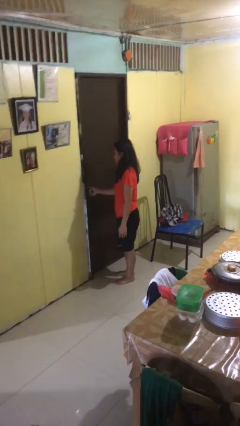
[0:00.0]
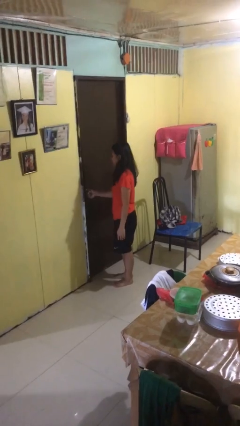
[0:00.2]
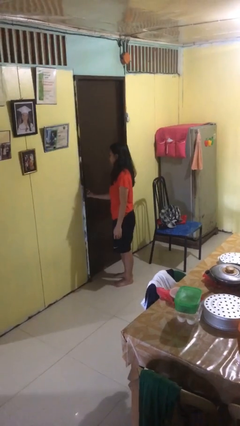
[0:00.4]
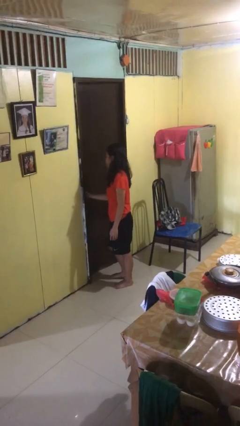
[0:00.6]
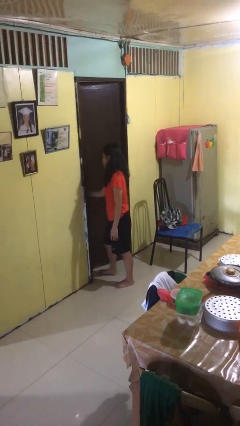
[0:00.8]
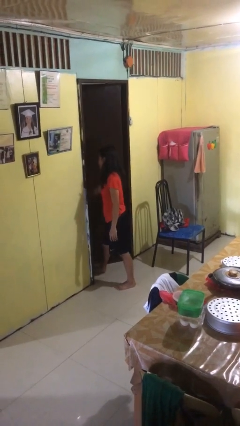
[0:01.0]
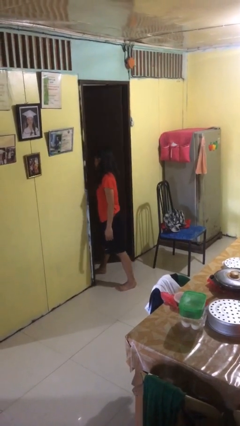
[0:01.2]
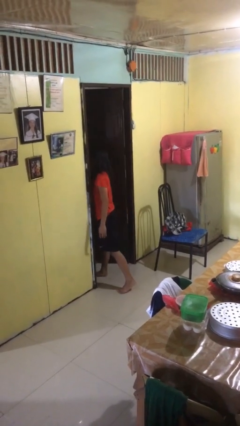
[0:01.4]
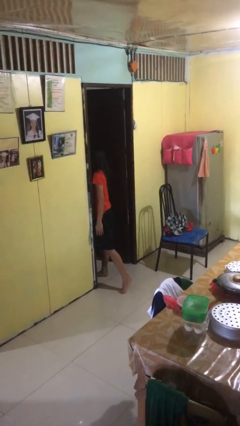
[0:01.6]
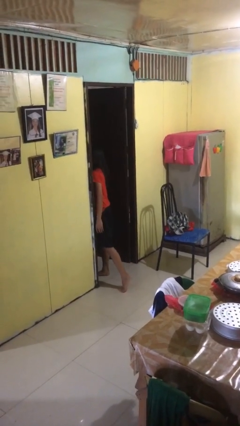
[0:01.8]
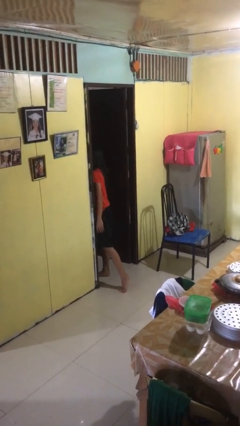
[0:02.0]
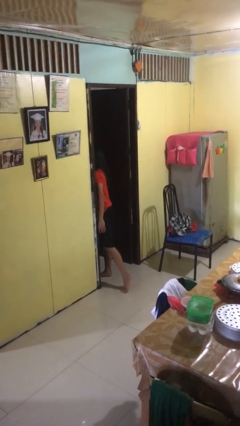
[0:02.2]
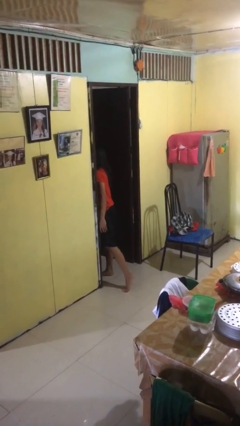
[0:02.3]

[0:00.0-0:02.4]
person opens facility door

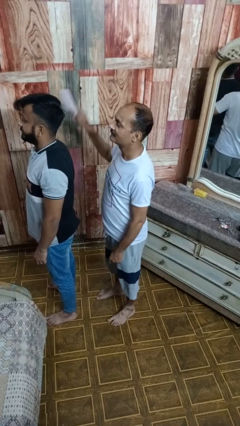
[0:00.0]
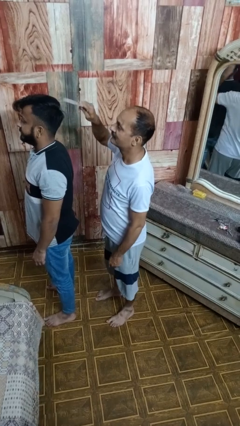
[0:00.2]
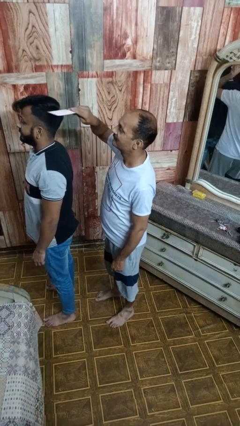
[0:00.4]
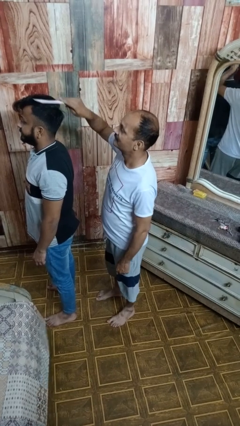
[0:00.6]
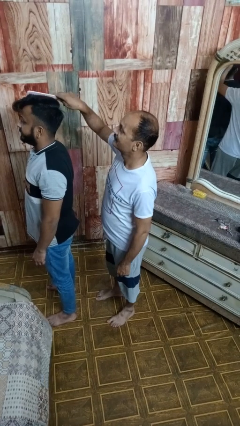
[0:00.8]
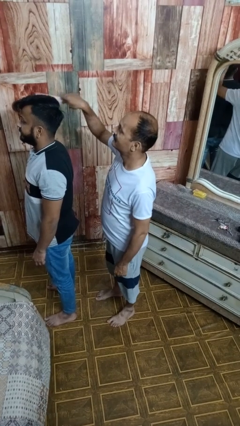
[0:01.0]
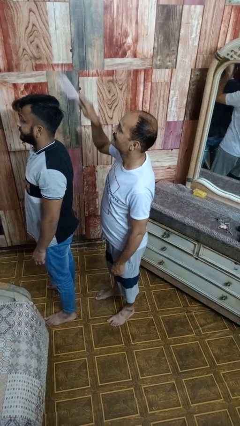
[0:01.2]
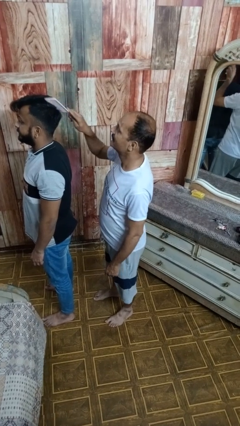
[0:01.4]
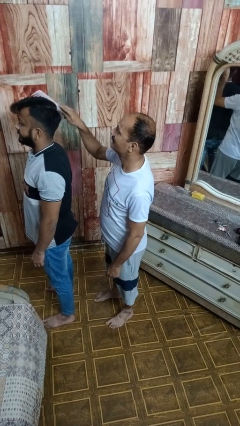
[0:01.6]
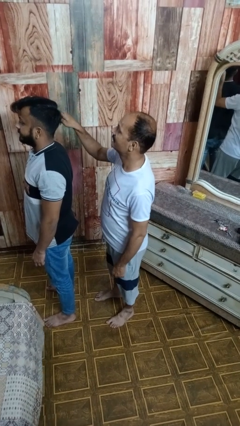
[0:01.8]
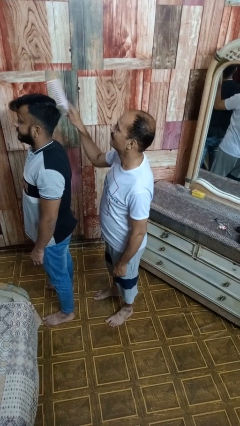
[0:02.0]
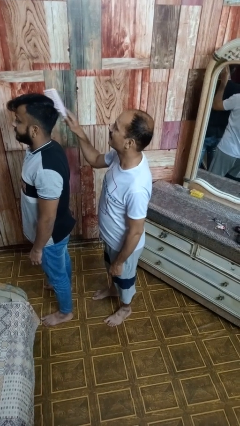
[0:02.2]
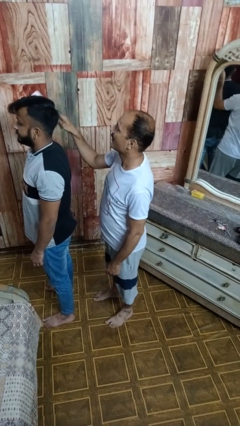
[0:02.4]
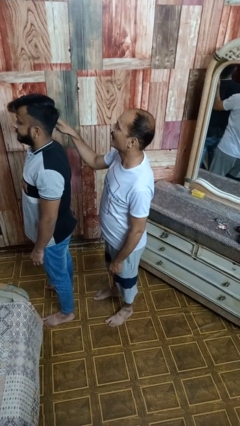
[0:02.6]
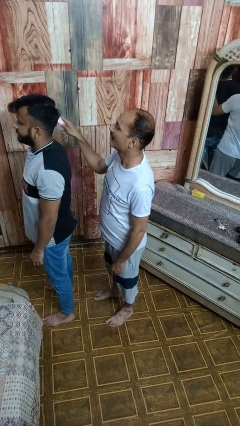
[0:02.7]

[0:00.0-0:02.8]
person brushes hair of person

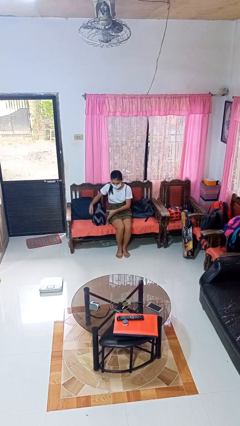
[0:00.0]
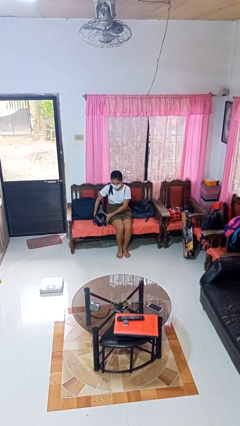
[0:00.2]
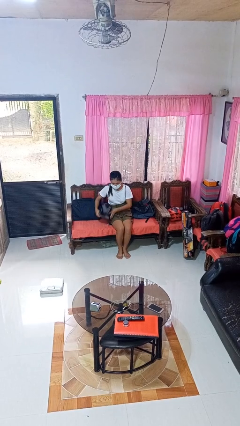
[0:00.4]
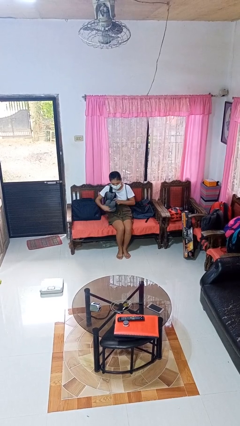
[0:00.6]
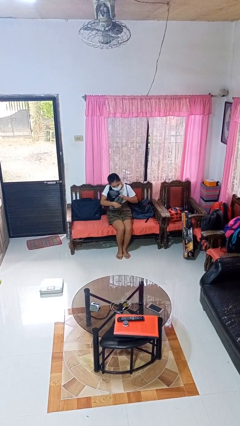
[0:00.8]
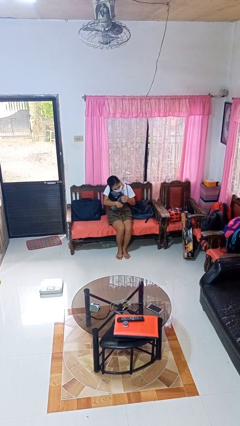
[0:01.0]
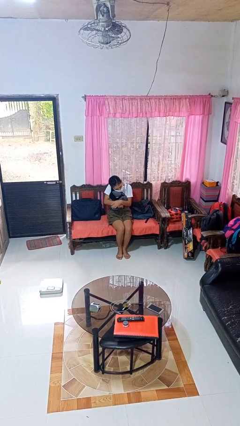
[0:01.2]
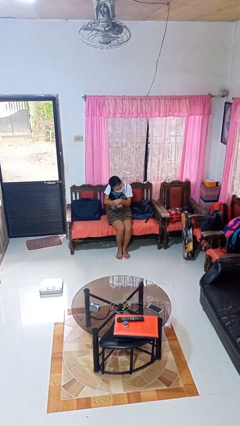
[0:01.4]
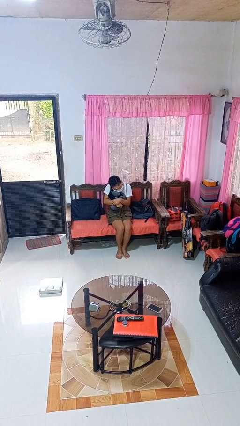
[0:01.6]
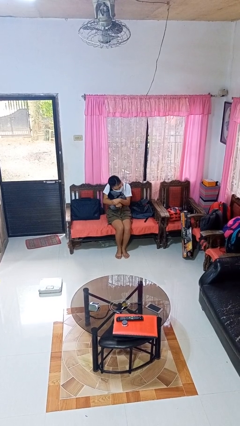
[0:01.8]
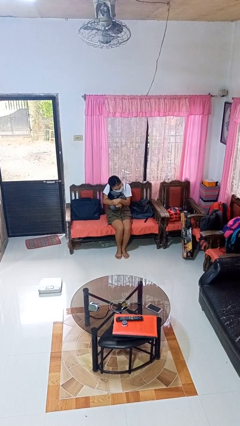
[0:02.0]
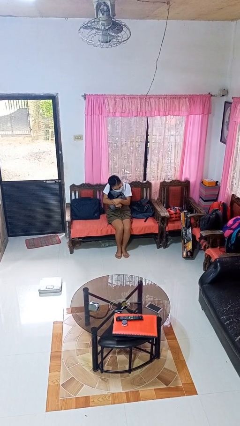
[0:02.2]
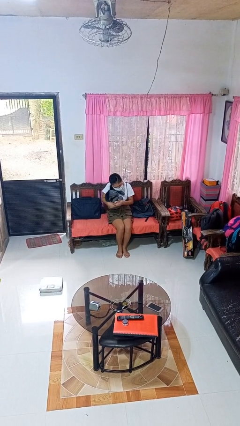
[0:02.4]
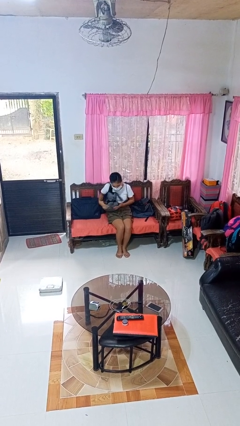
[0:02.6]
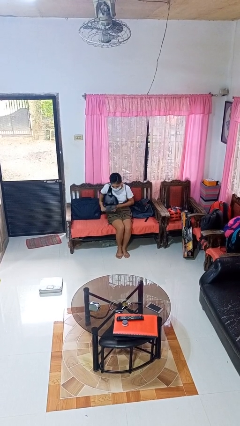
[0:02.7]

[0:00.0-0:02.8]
person hugs stuffed animal

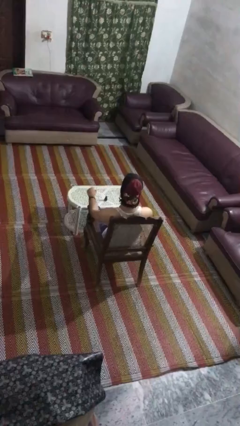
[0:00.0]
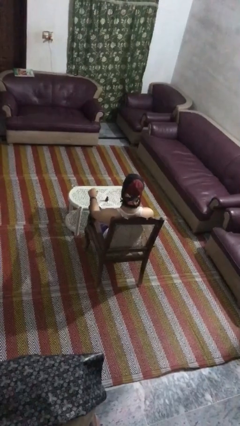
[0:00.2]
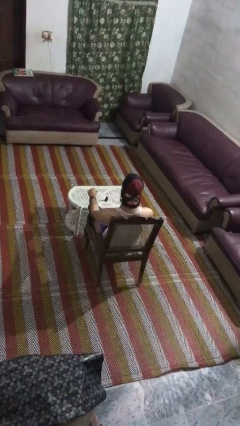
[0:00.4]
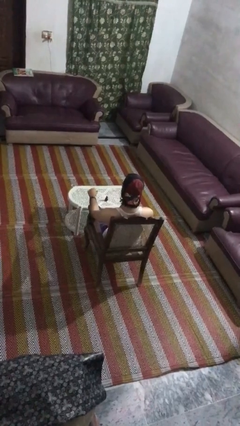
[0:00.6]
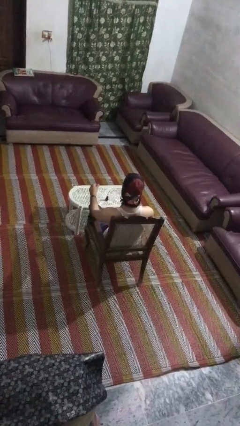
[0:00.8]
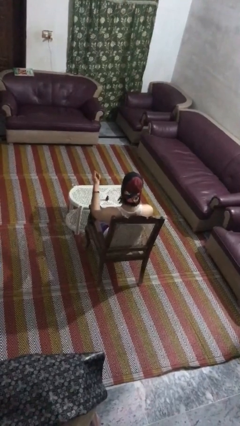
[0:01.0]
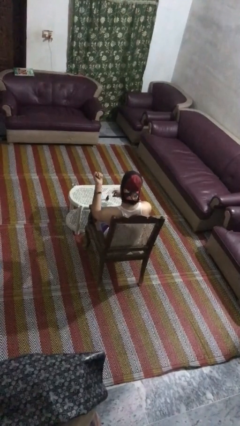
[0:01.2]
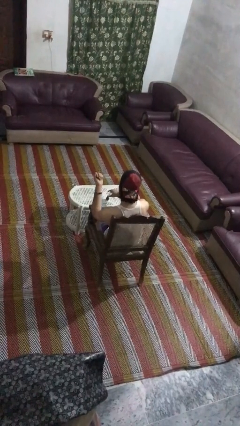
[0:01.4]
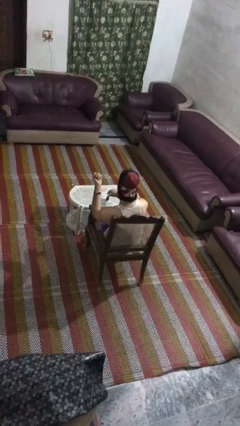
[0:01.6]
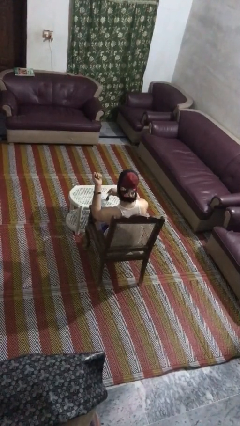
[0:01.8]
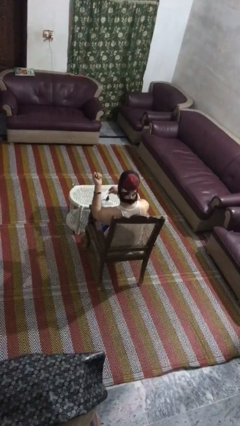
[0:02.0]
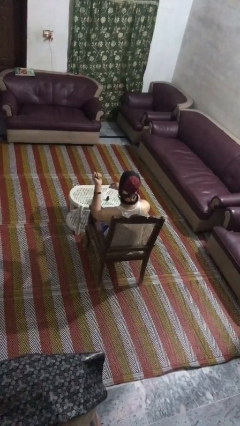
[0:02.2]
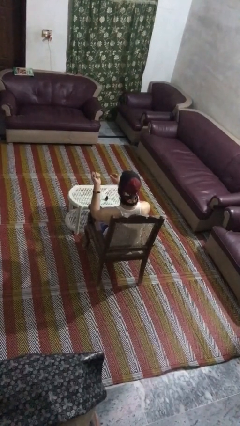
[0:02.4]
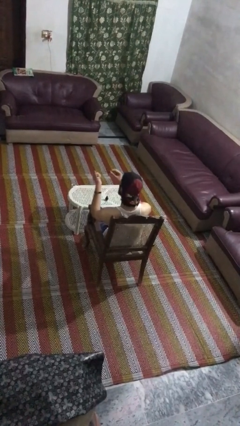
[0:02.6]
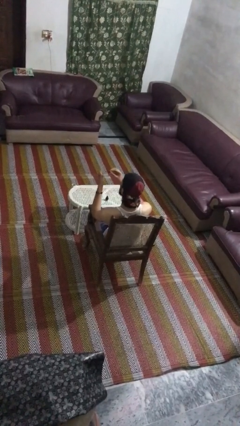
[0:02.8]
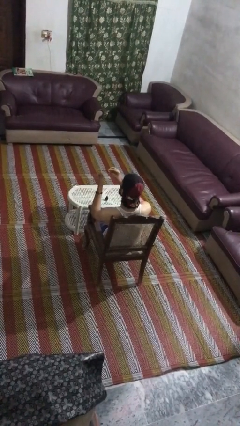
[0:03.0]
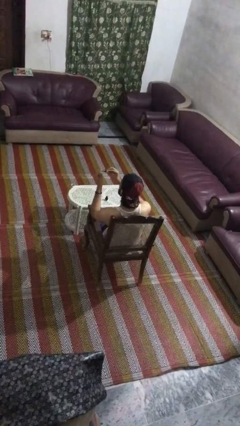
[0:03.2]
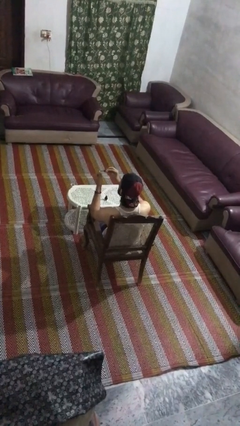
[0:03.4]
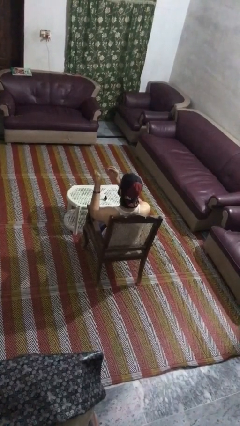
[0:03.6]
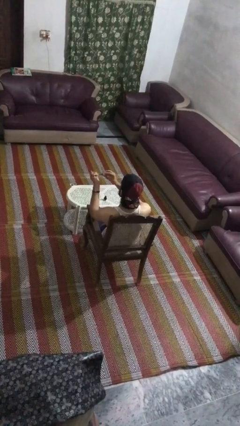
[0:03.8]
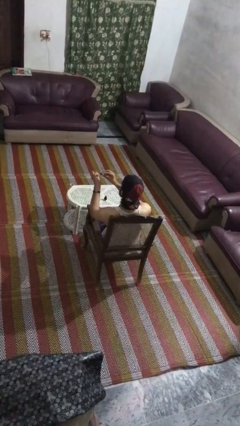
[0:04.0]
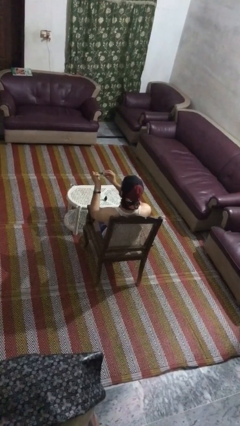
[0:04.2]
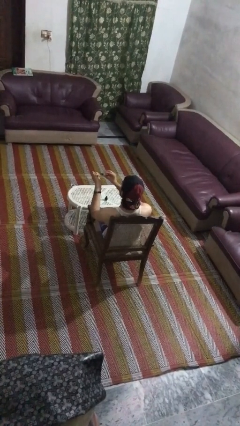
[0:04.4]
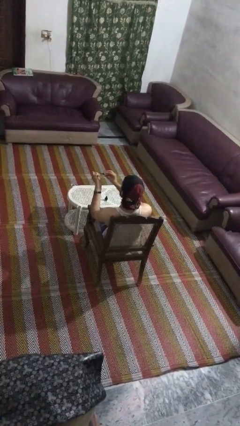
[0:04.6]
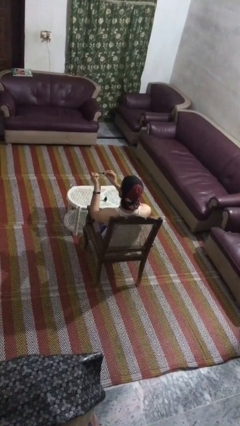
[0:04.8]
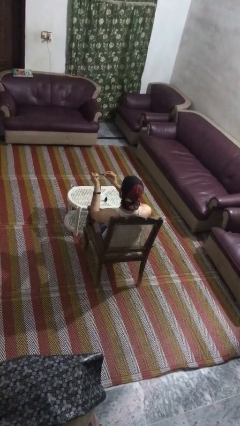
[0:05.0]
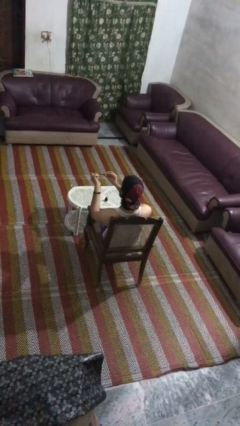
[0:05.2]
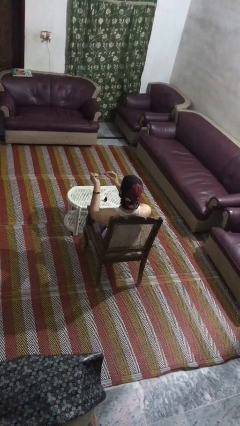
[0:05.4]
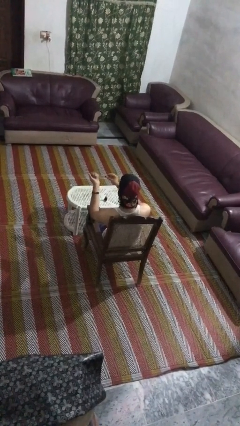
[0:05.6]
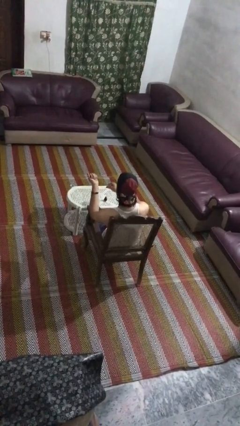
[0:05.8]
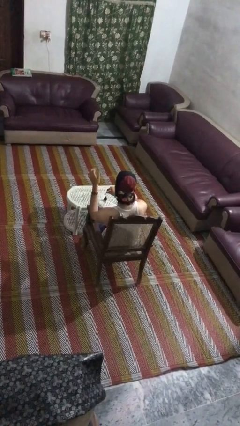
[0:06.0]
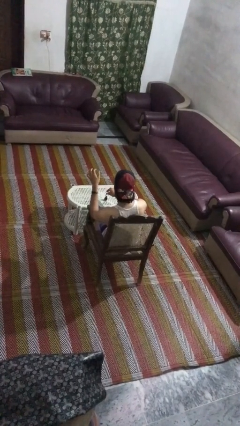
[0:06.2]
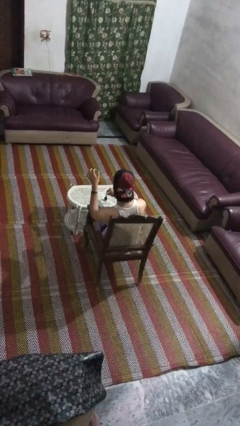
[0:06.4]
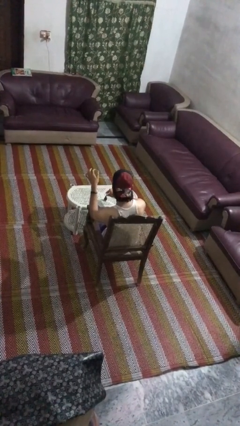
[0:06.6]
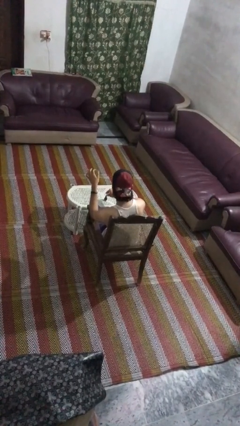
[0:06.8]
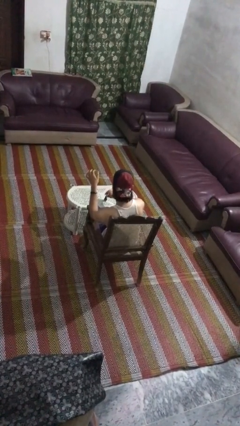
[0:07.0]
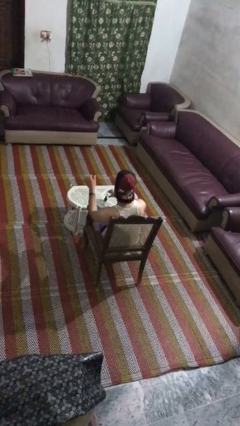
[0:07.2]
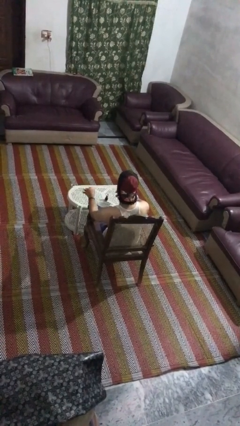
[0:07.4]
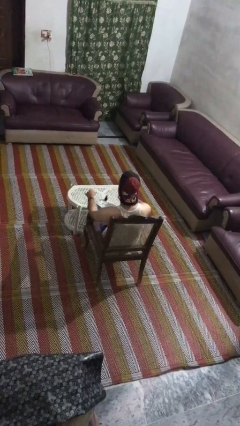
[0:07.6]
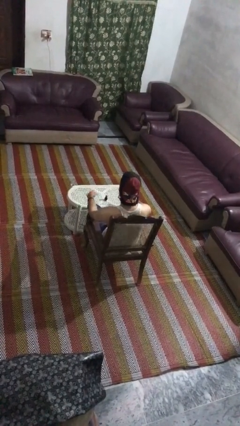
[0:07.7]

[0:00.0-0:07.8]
person paints fingernails

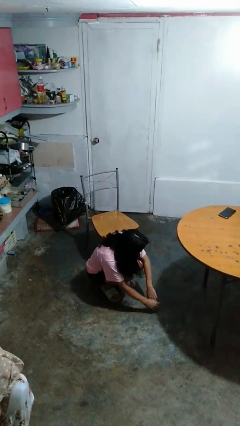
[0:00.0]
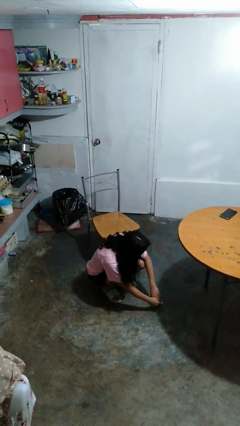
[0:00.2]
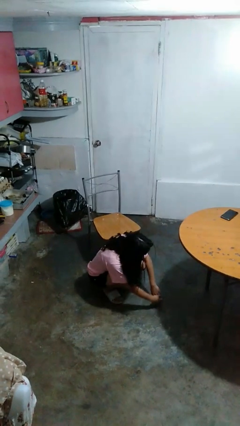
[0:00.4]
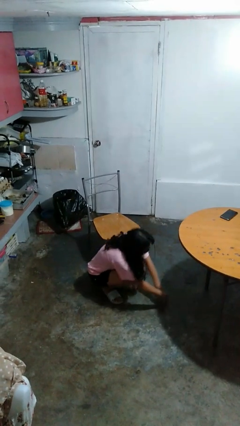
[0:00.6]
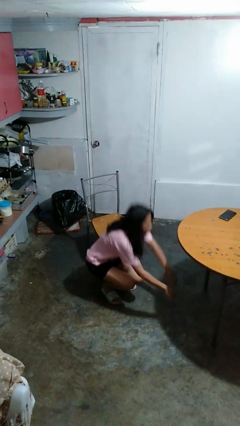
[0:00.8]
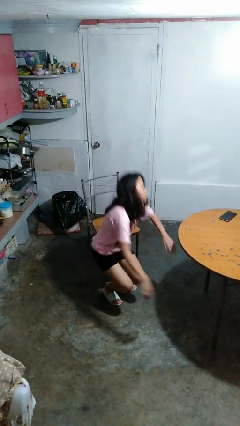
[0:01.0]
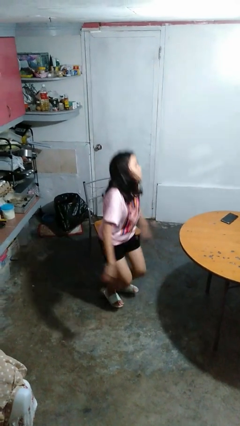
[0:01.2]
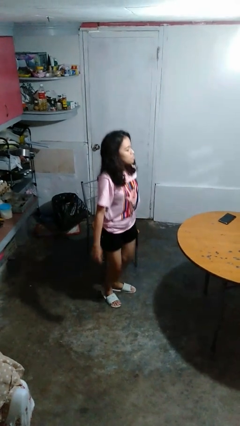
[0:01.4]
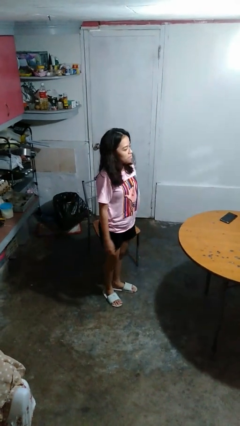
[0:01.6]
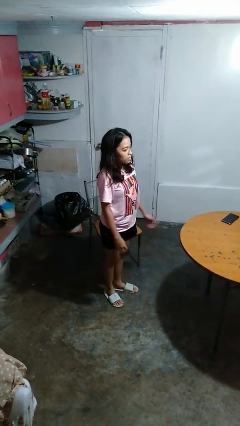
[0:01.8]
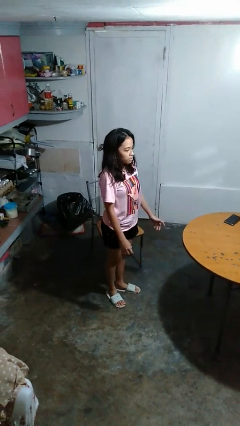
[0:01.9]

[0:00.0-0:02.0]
person stands up from floor
